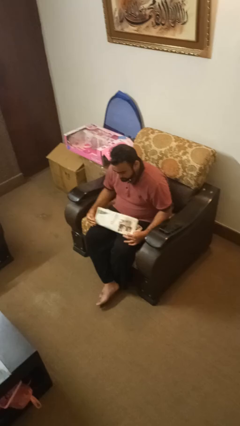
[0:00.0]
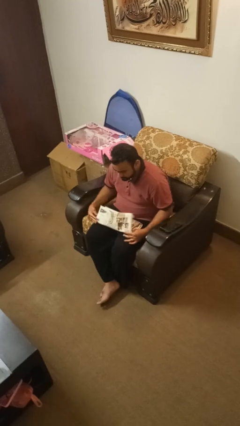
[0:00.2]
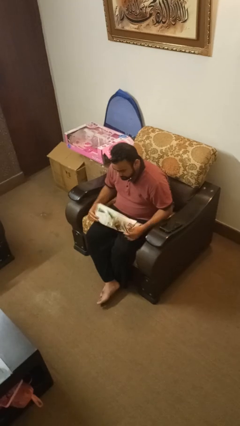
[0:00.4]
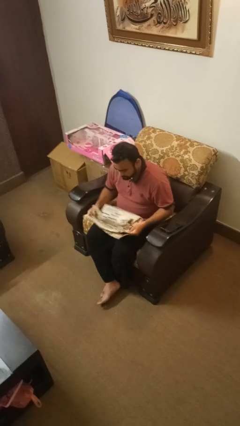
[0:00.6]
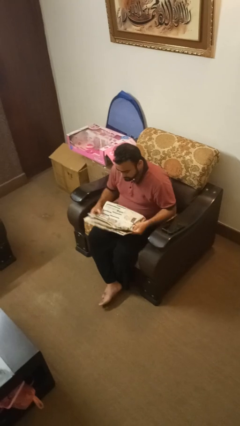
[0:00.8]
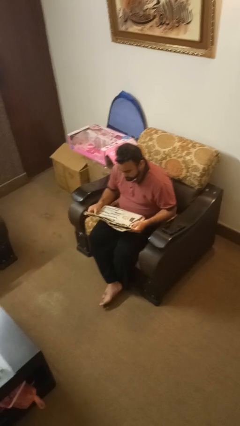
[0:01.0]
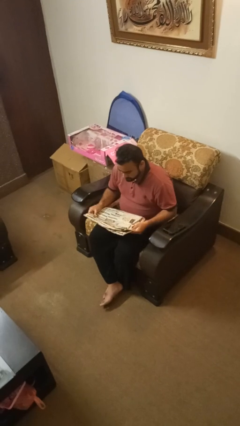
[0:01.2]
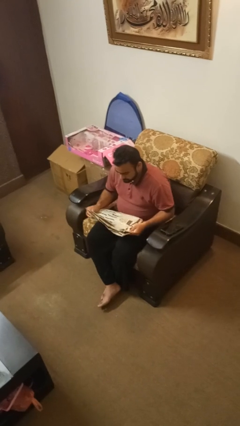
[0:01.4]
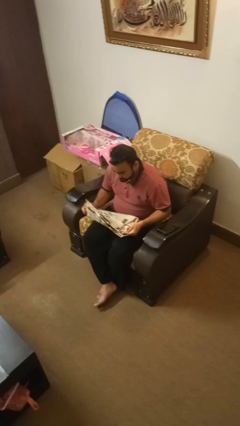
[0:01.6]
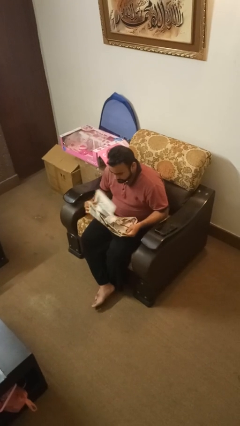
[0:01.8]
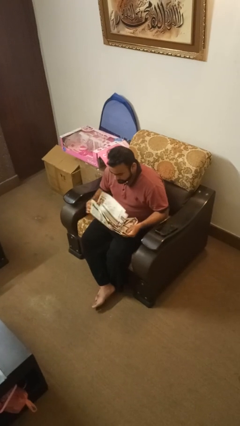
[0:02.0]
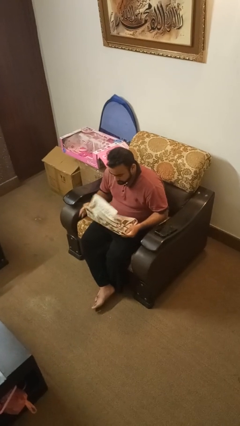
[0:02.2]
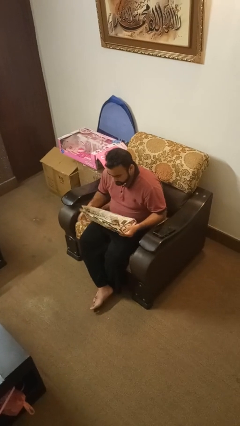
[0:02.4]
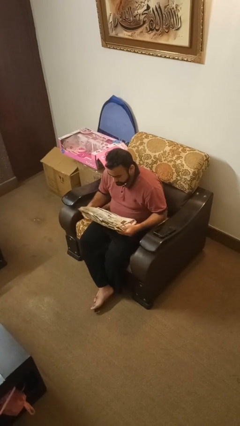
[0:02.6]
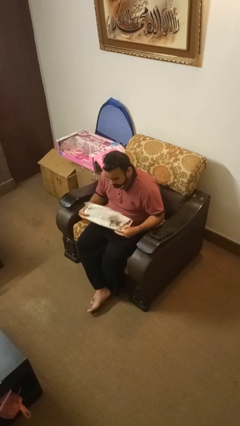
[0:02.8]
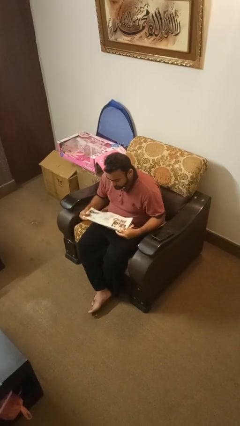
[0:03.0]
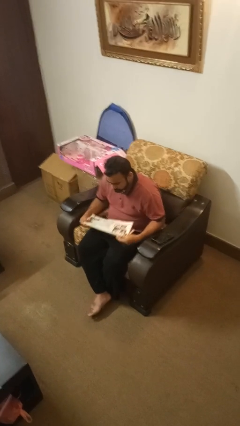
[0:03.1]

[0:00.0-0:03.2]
person reads newspaper

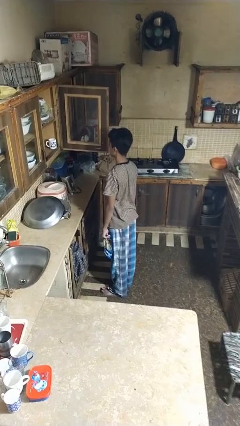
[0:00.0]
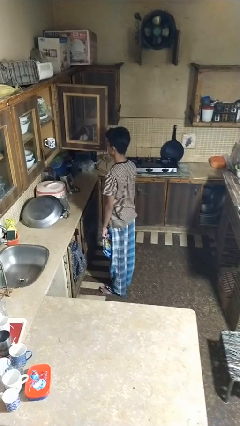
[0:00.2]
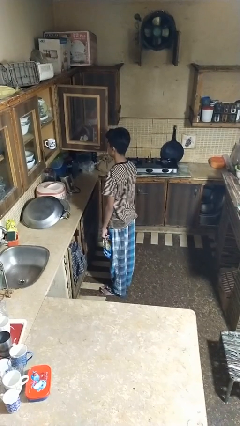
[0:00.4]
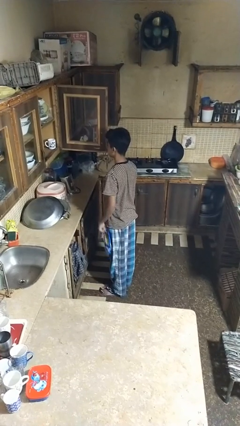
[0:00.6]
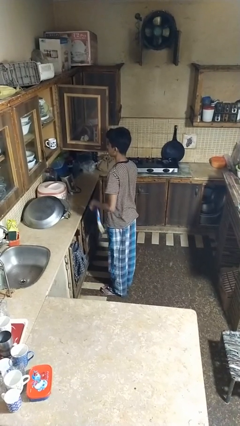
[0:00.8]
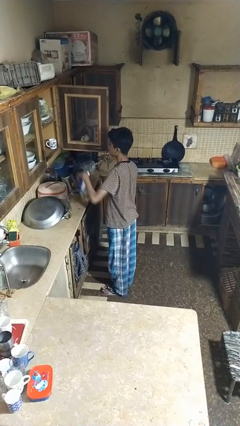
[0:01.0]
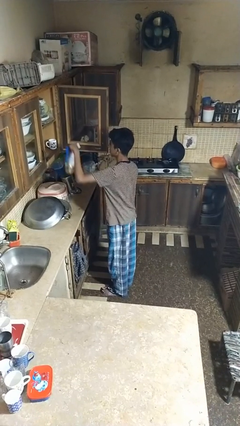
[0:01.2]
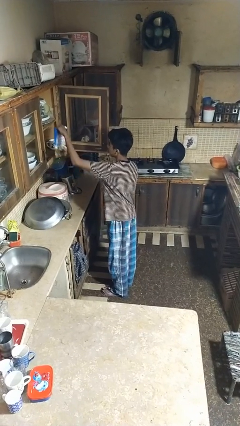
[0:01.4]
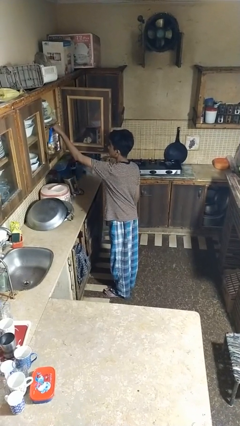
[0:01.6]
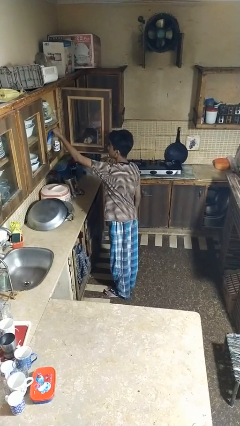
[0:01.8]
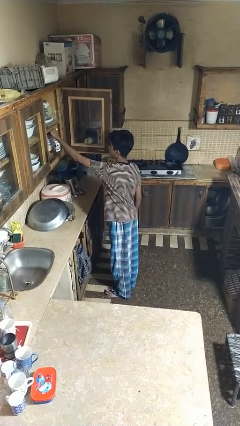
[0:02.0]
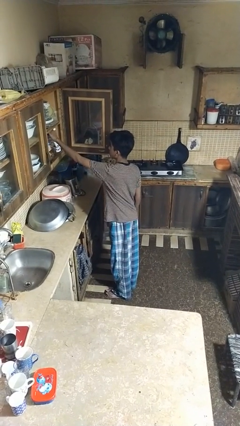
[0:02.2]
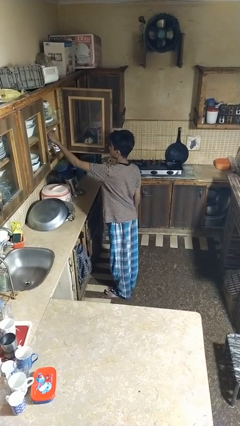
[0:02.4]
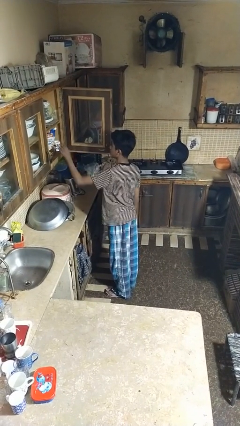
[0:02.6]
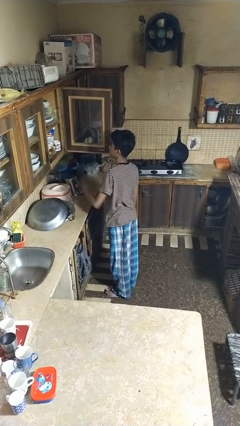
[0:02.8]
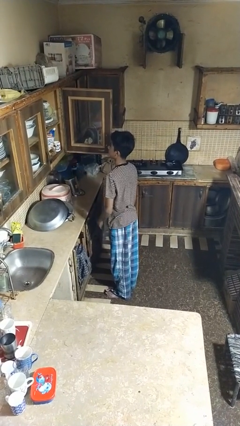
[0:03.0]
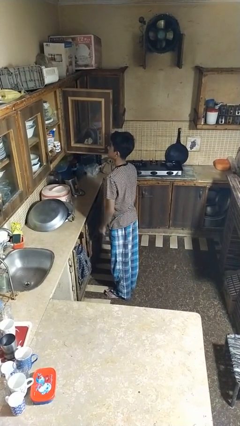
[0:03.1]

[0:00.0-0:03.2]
person puts object in cabinet

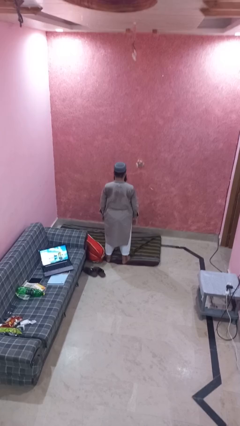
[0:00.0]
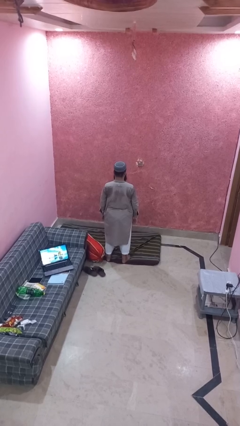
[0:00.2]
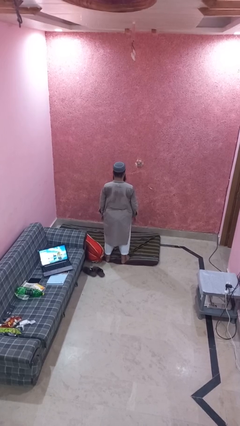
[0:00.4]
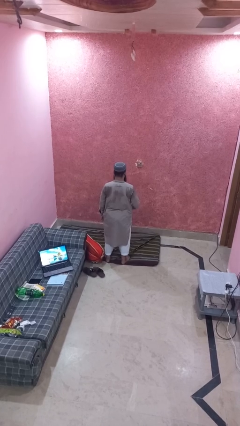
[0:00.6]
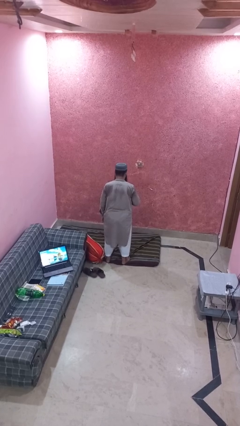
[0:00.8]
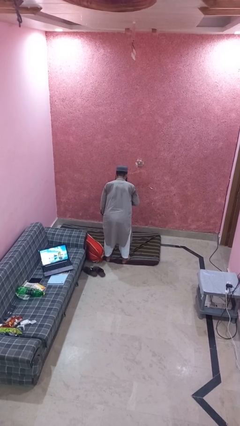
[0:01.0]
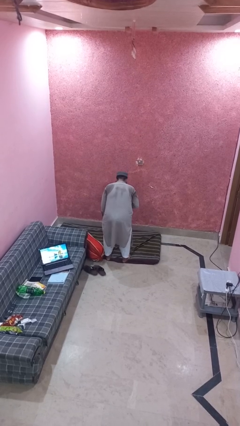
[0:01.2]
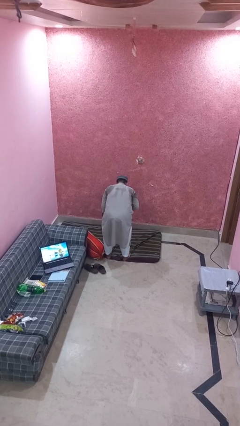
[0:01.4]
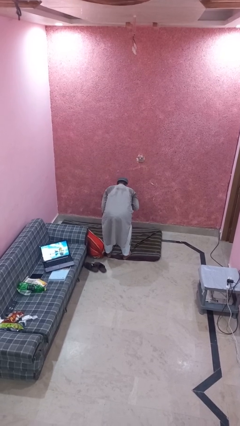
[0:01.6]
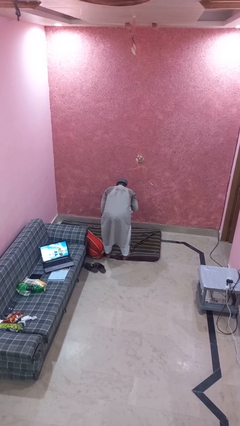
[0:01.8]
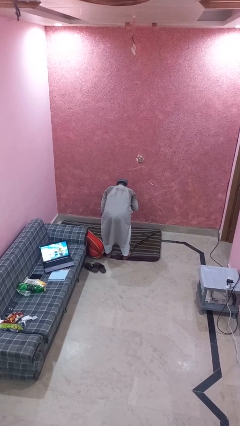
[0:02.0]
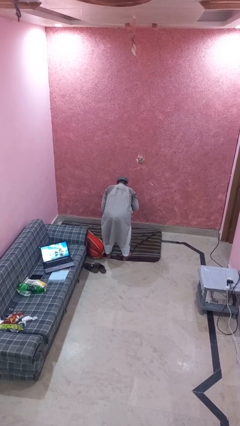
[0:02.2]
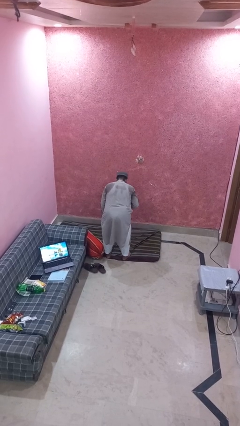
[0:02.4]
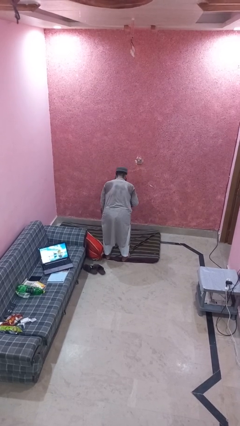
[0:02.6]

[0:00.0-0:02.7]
person bows

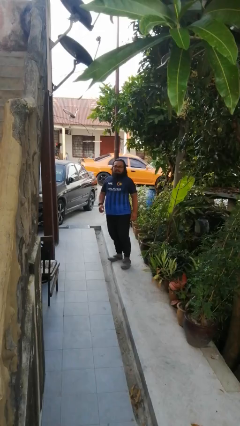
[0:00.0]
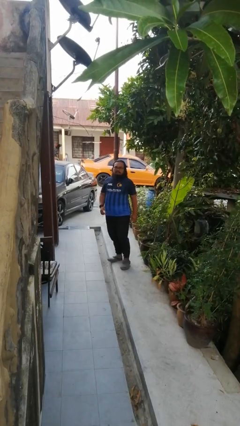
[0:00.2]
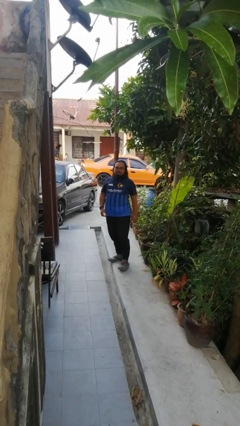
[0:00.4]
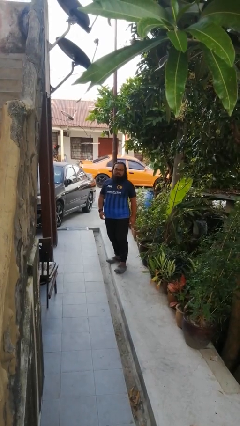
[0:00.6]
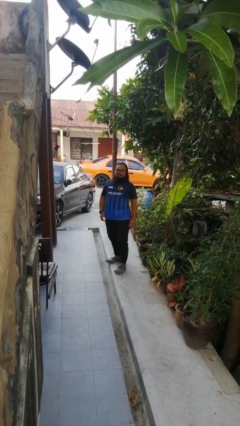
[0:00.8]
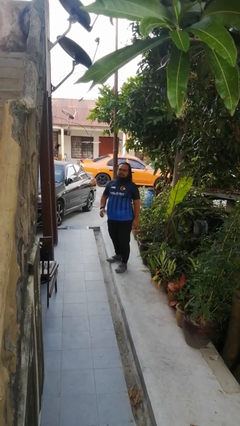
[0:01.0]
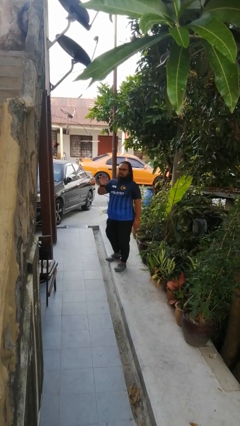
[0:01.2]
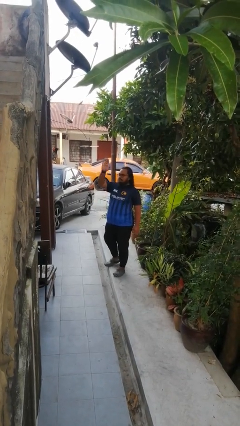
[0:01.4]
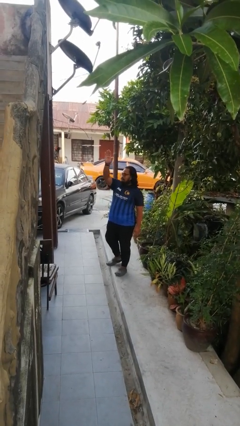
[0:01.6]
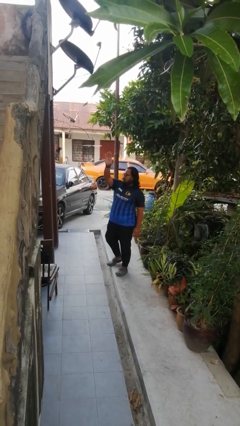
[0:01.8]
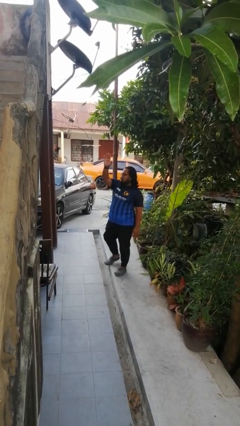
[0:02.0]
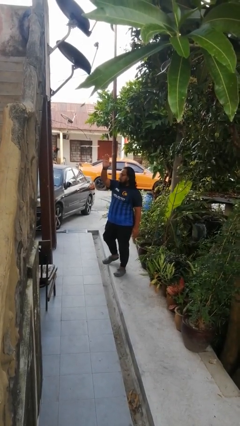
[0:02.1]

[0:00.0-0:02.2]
person gestures raise hand

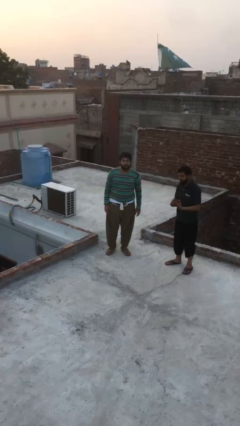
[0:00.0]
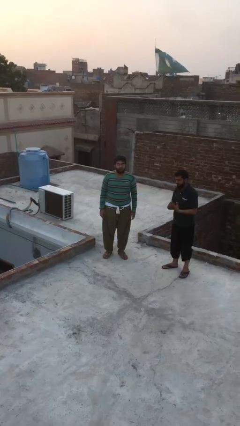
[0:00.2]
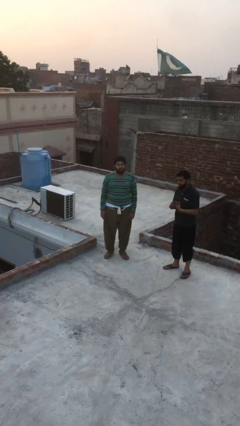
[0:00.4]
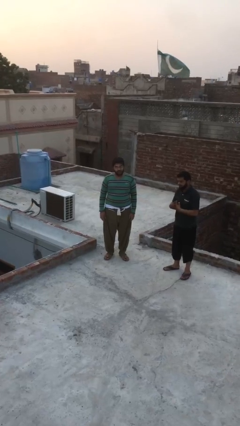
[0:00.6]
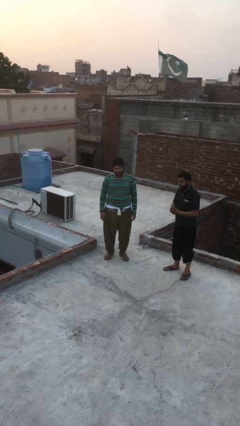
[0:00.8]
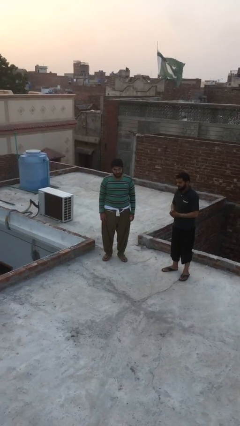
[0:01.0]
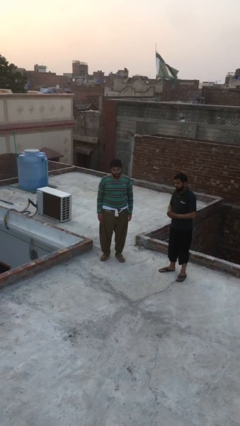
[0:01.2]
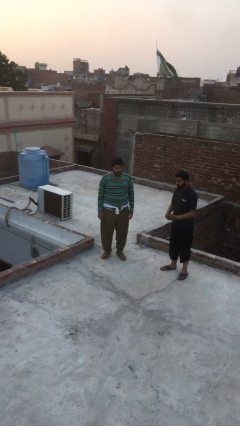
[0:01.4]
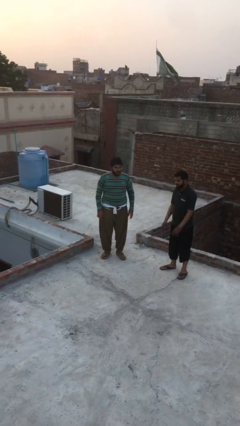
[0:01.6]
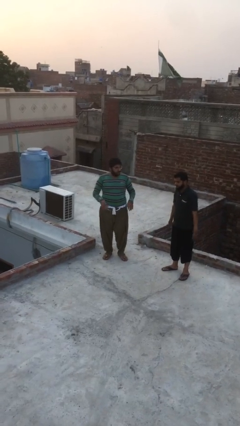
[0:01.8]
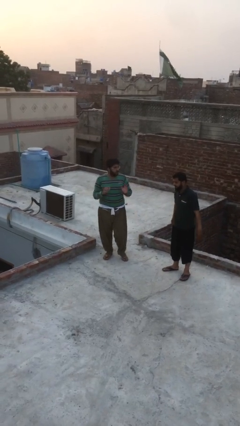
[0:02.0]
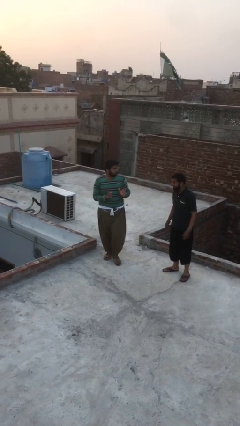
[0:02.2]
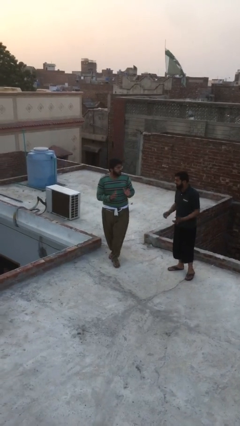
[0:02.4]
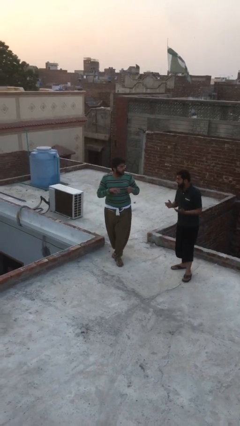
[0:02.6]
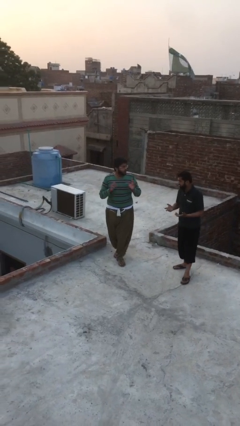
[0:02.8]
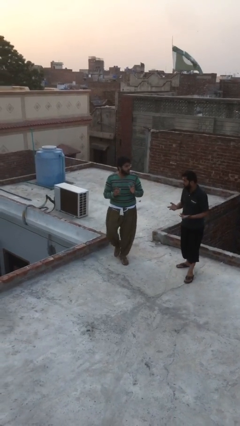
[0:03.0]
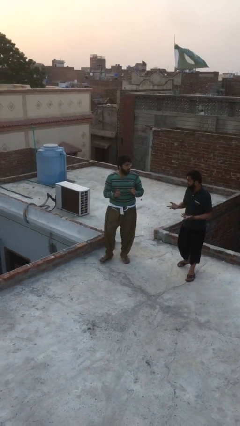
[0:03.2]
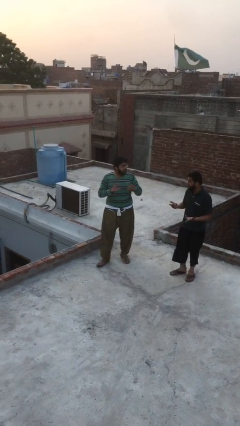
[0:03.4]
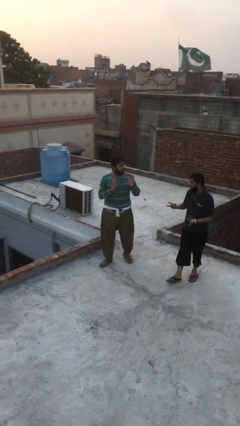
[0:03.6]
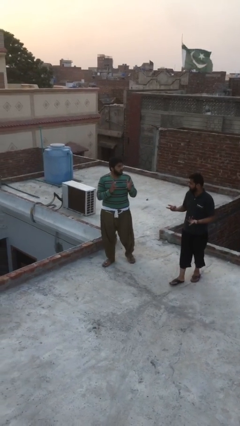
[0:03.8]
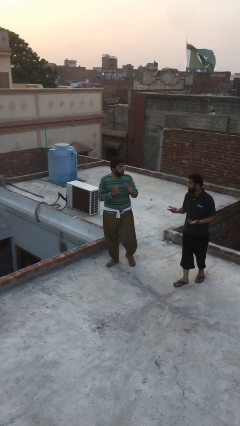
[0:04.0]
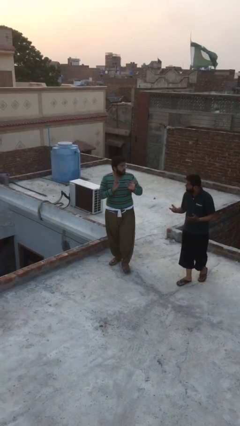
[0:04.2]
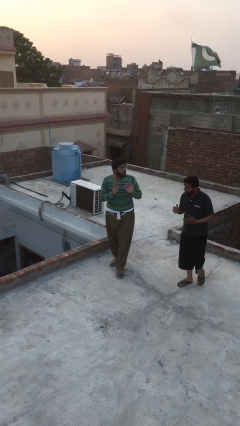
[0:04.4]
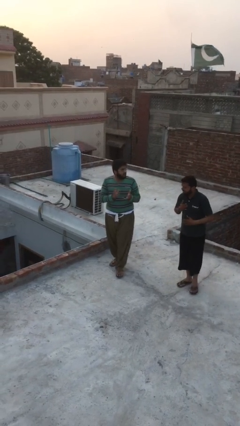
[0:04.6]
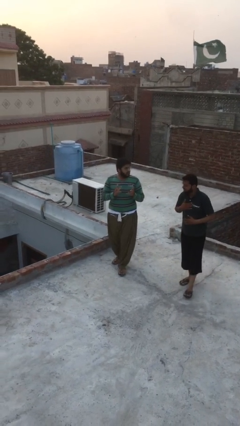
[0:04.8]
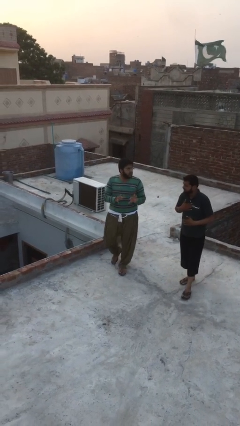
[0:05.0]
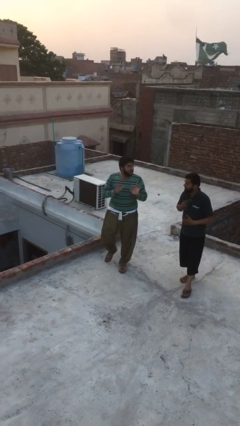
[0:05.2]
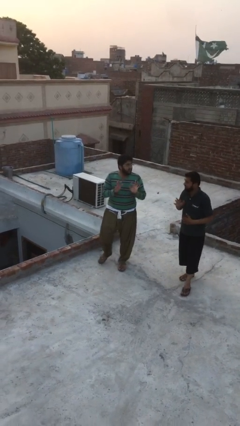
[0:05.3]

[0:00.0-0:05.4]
person talks to person

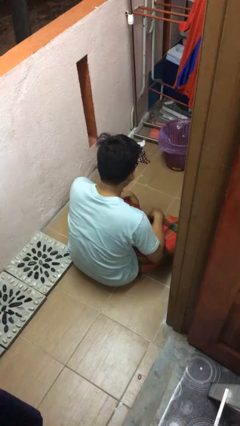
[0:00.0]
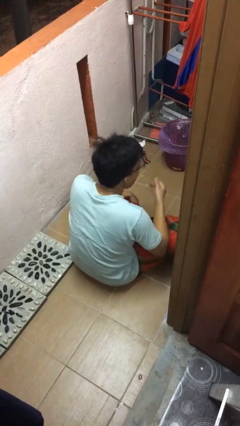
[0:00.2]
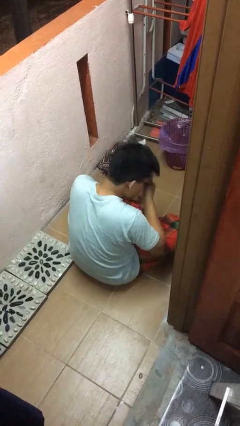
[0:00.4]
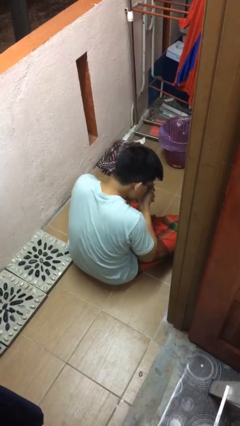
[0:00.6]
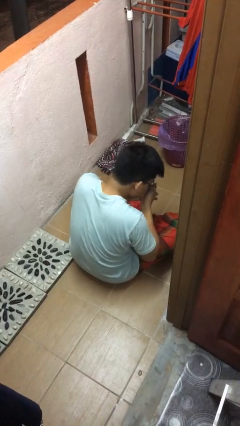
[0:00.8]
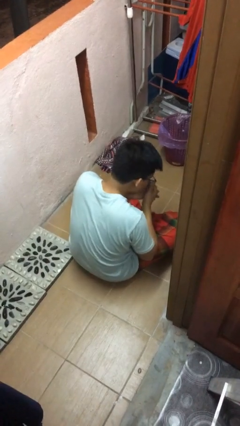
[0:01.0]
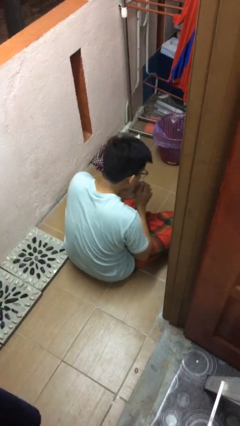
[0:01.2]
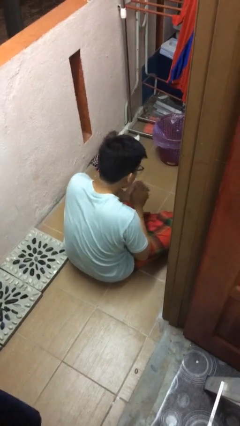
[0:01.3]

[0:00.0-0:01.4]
person sneezes into hand
